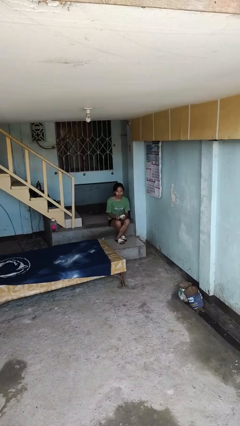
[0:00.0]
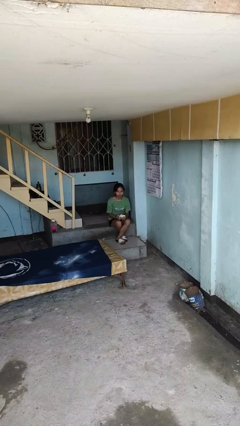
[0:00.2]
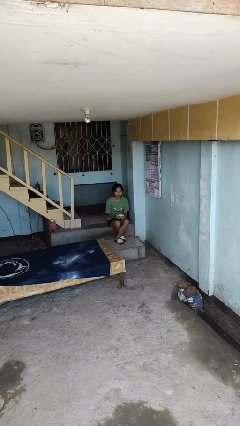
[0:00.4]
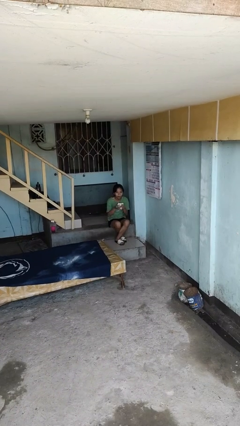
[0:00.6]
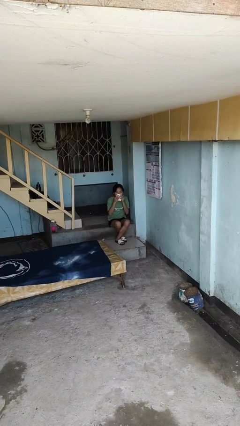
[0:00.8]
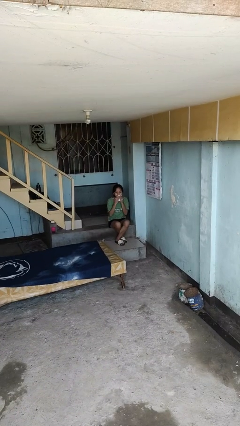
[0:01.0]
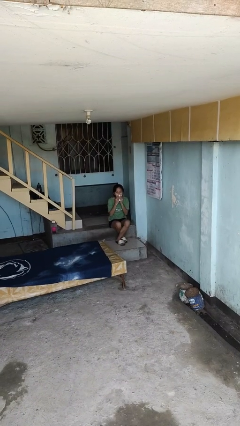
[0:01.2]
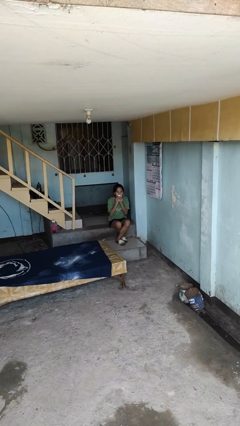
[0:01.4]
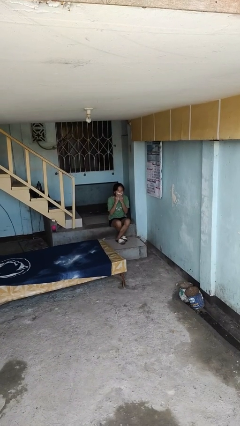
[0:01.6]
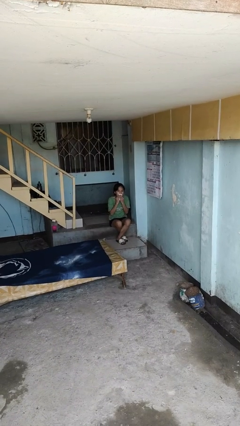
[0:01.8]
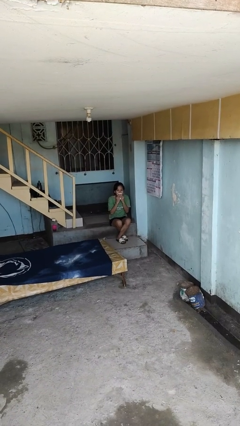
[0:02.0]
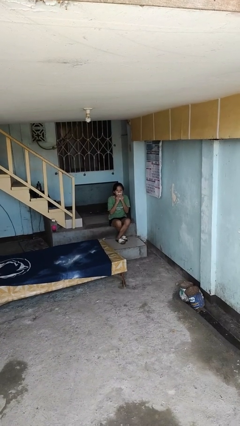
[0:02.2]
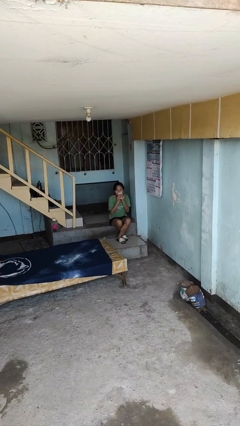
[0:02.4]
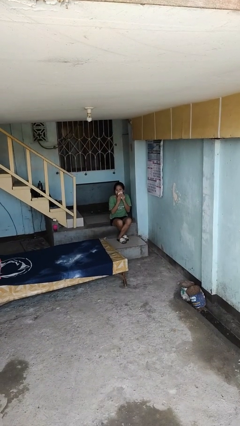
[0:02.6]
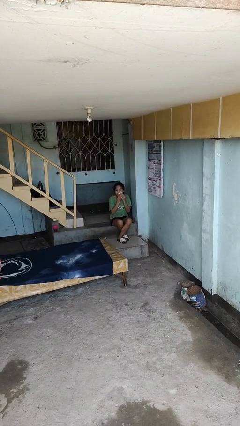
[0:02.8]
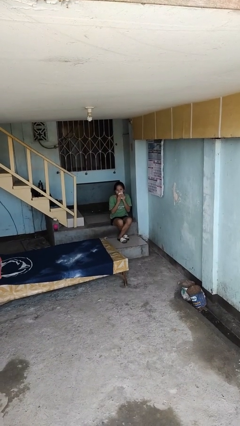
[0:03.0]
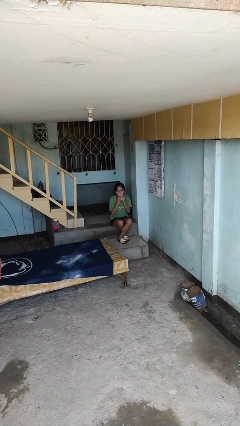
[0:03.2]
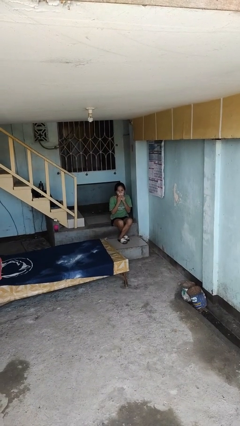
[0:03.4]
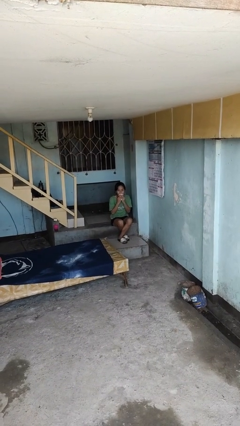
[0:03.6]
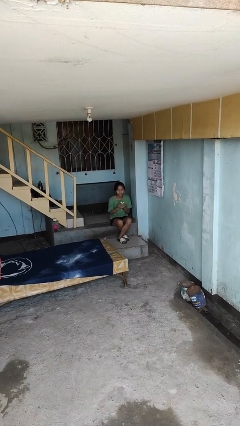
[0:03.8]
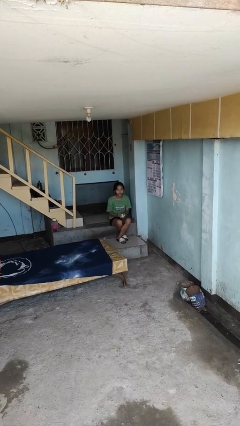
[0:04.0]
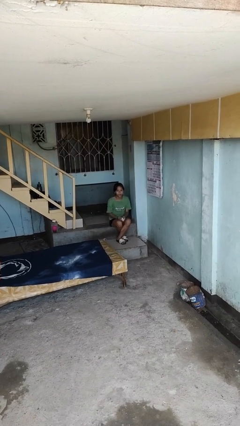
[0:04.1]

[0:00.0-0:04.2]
person wipes mouth with napkin

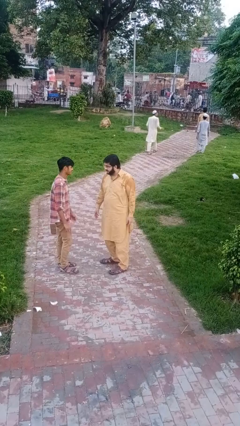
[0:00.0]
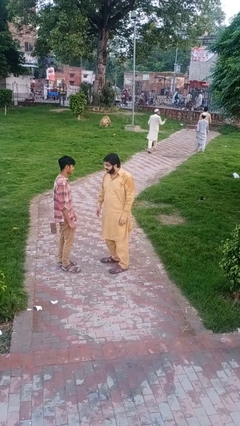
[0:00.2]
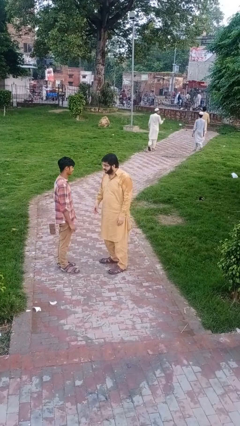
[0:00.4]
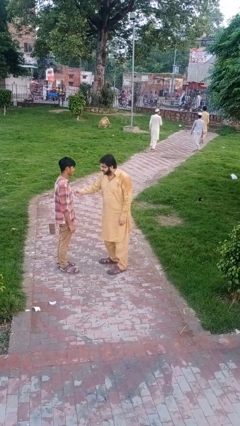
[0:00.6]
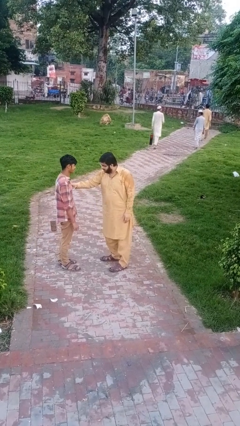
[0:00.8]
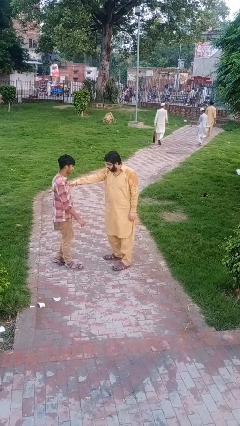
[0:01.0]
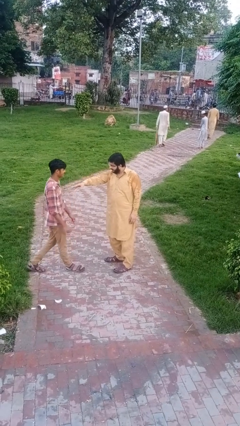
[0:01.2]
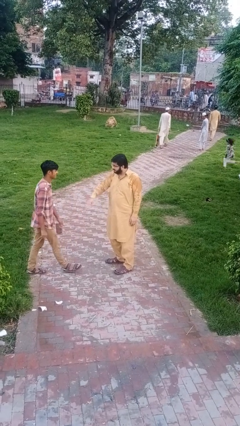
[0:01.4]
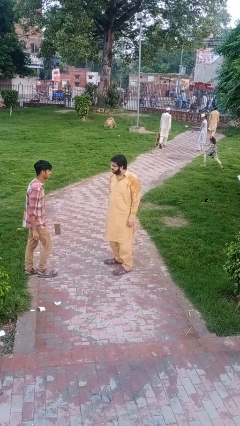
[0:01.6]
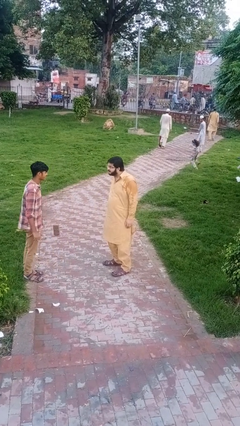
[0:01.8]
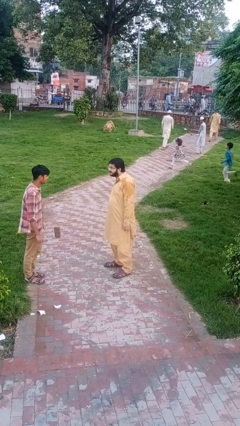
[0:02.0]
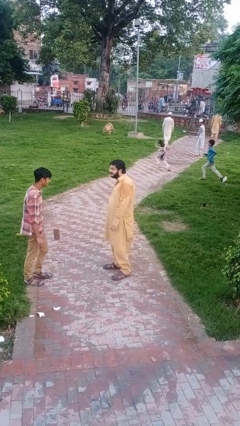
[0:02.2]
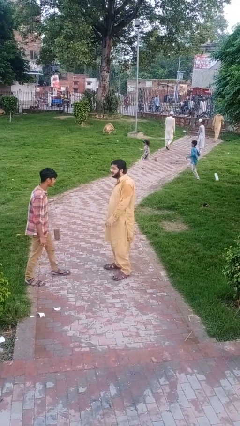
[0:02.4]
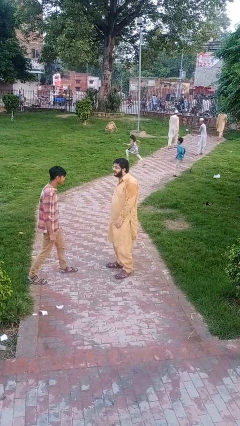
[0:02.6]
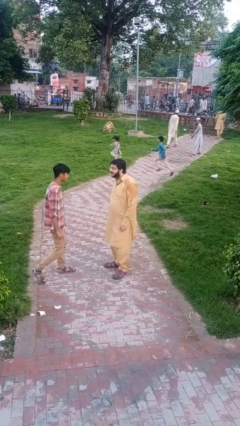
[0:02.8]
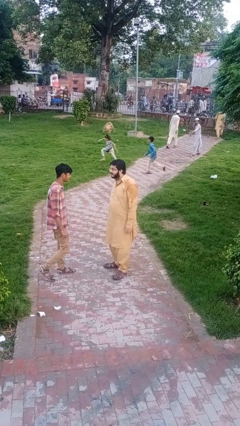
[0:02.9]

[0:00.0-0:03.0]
person shoves person

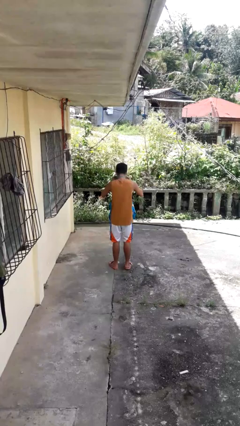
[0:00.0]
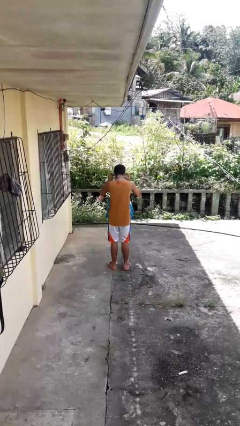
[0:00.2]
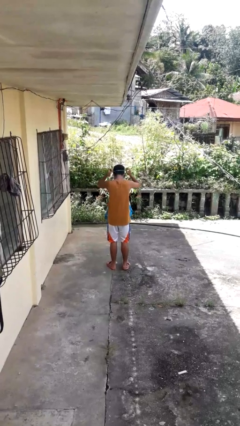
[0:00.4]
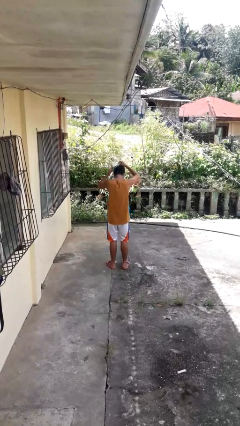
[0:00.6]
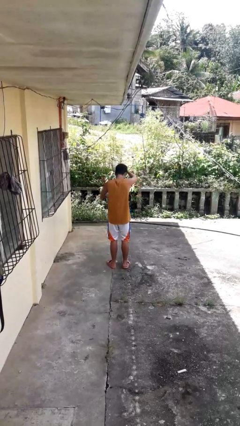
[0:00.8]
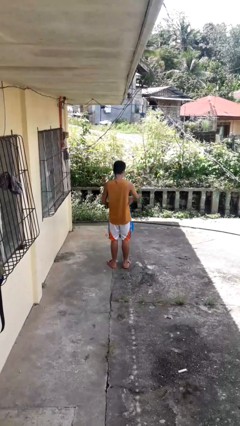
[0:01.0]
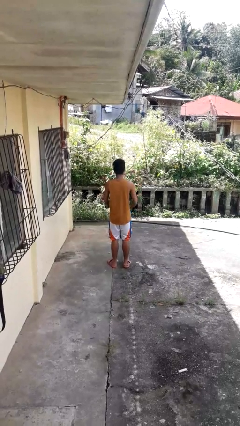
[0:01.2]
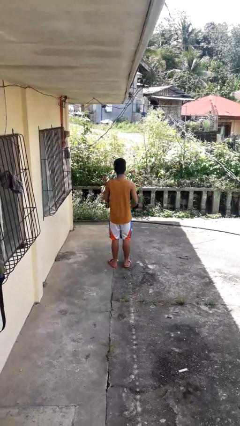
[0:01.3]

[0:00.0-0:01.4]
person takes off apron

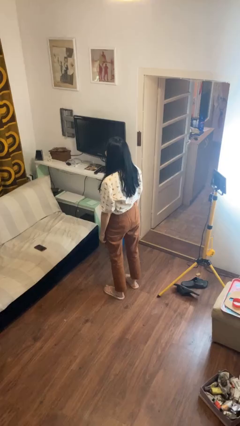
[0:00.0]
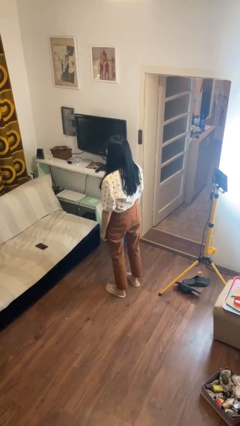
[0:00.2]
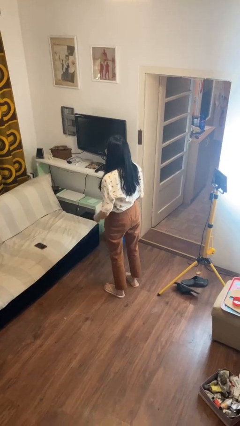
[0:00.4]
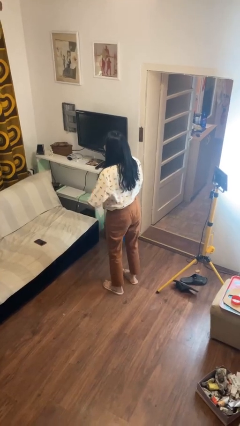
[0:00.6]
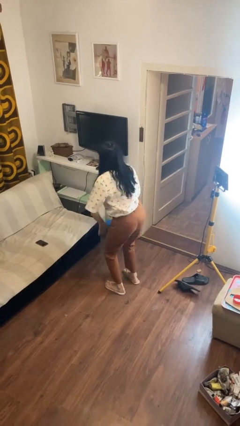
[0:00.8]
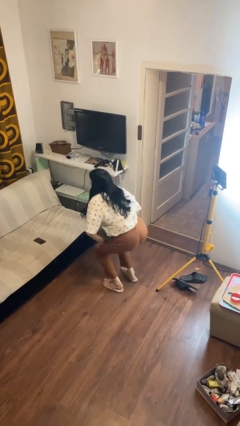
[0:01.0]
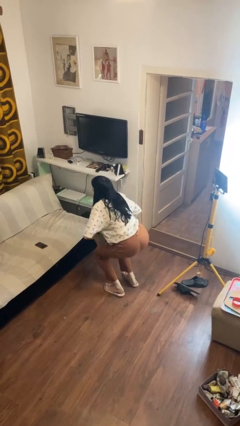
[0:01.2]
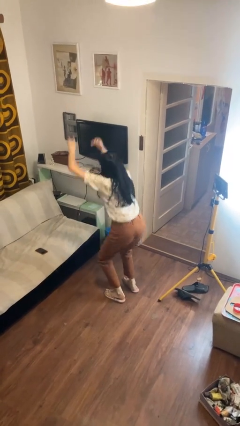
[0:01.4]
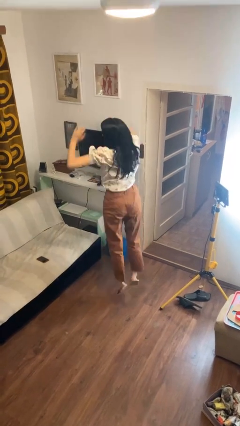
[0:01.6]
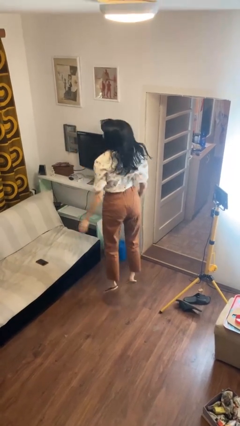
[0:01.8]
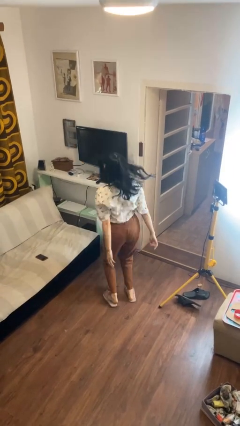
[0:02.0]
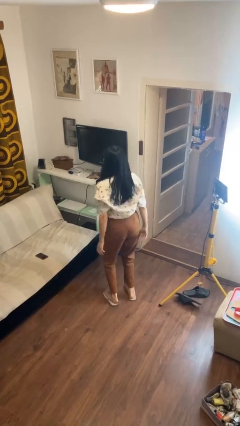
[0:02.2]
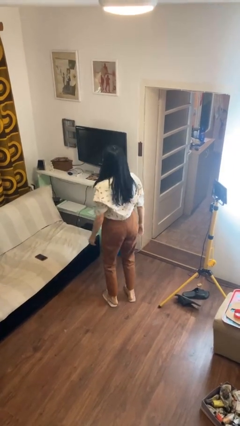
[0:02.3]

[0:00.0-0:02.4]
person jumps

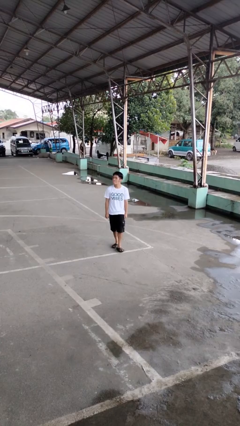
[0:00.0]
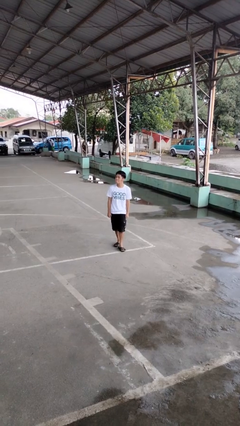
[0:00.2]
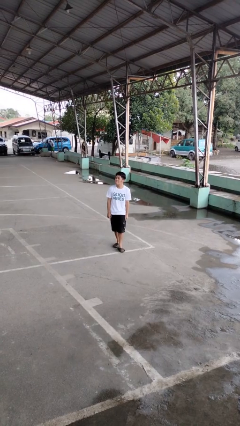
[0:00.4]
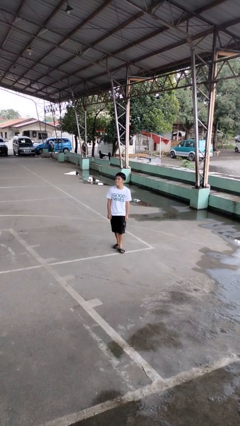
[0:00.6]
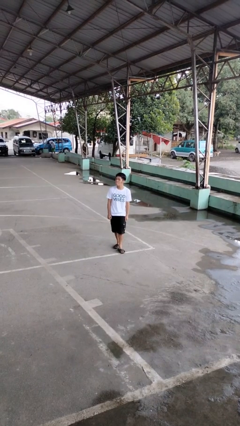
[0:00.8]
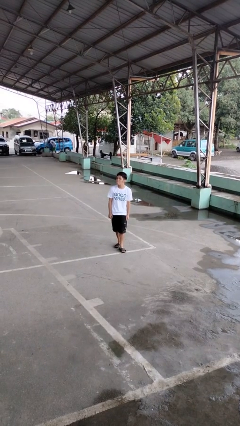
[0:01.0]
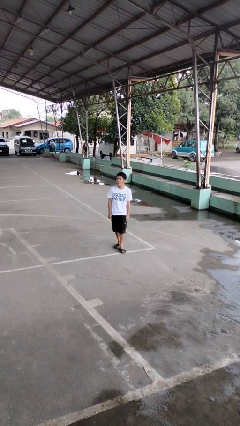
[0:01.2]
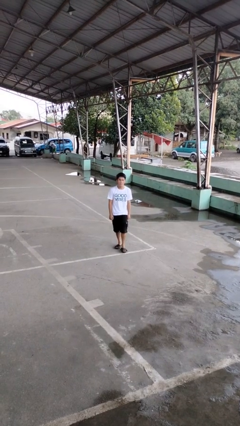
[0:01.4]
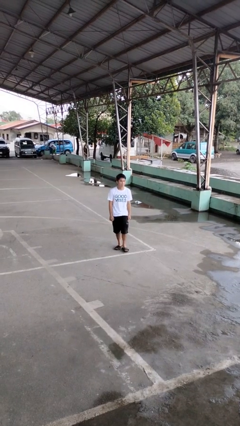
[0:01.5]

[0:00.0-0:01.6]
person sticks out tongue

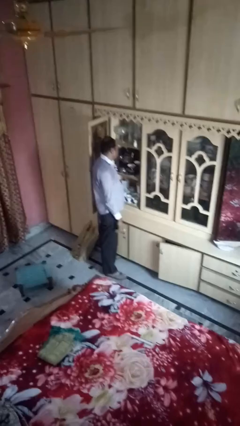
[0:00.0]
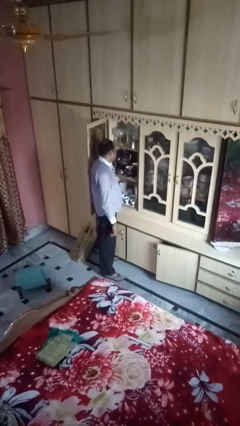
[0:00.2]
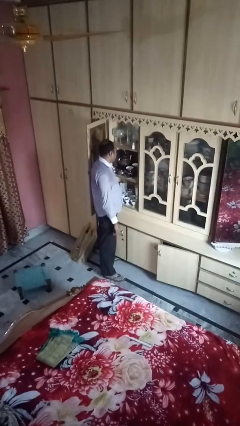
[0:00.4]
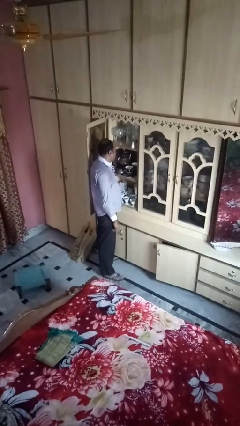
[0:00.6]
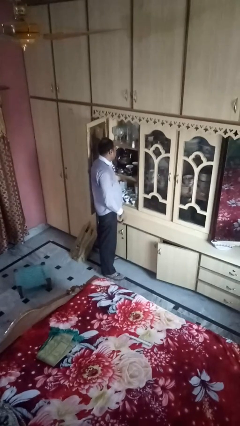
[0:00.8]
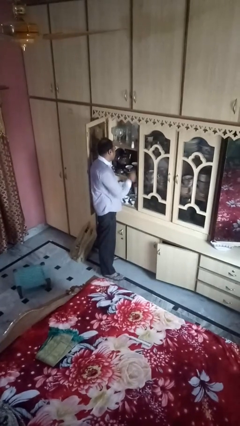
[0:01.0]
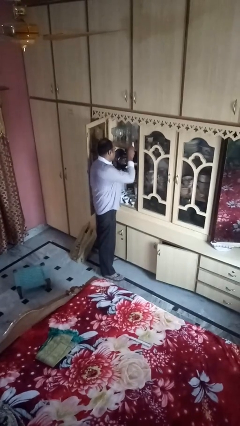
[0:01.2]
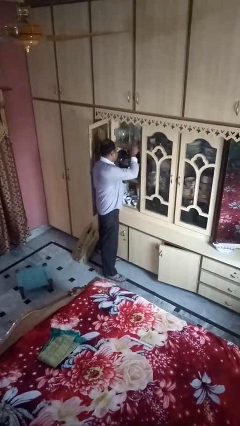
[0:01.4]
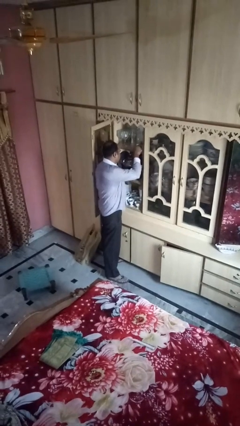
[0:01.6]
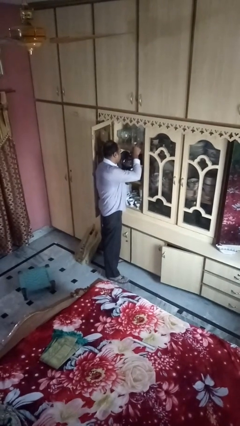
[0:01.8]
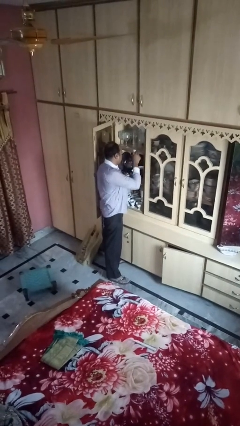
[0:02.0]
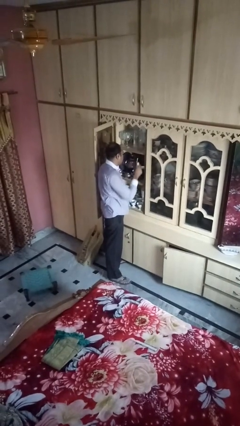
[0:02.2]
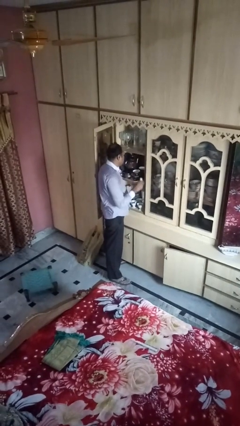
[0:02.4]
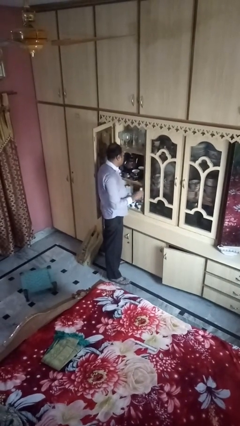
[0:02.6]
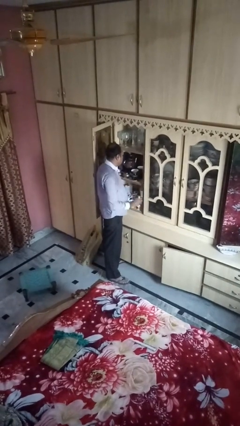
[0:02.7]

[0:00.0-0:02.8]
person picks up object from shelf

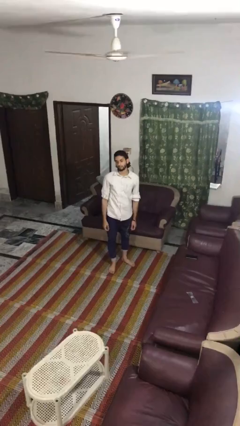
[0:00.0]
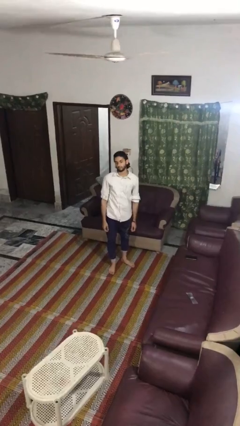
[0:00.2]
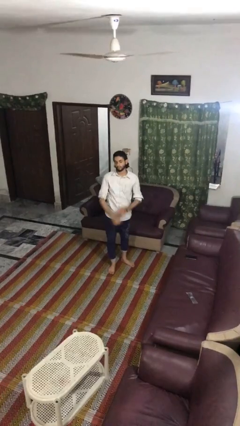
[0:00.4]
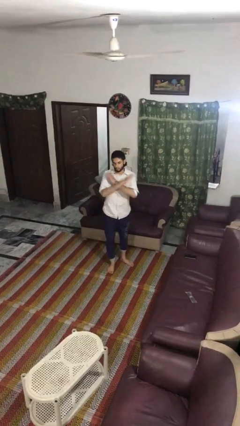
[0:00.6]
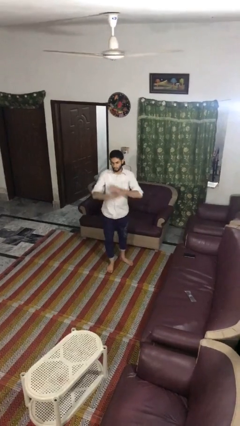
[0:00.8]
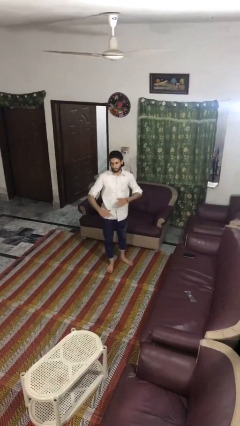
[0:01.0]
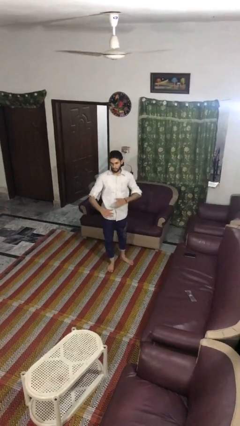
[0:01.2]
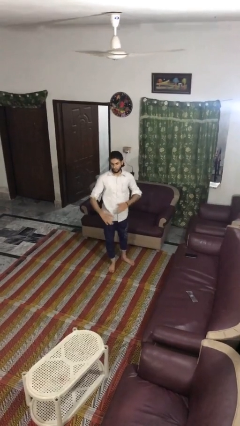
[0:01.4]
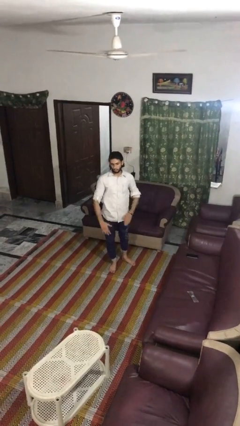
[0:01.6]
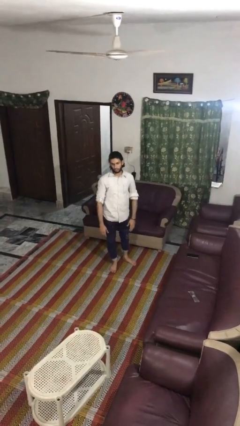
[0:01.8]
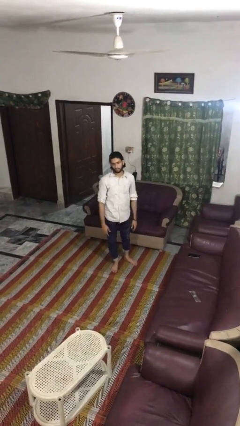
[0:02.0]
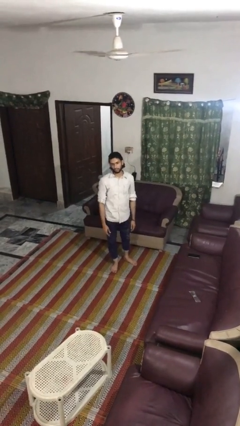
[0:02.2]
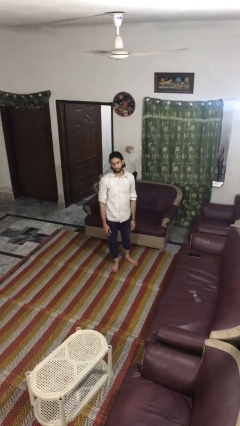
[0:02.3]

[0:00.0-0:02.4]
person karate chop
